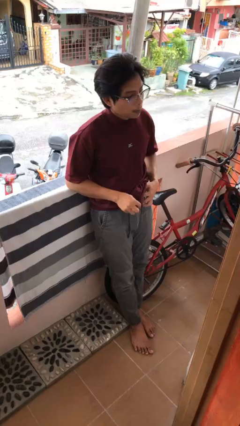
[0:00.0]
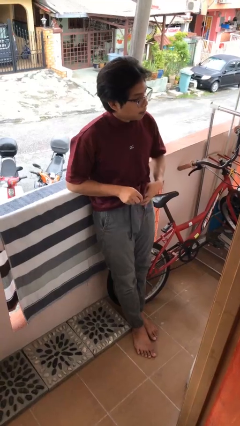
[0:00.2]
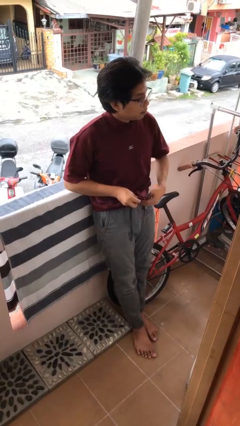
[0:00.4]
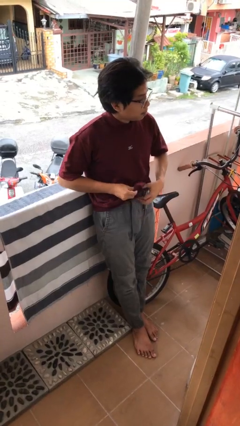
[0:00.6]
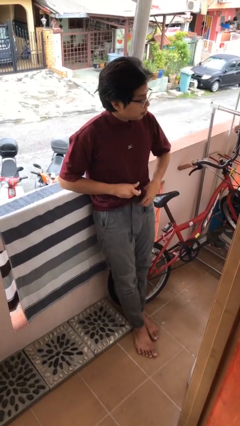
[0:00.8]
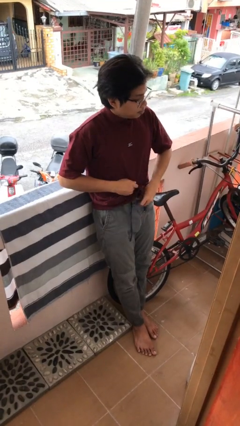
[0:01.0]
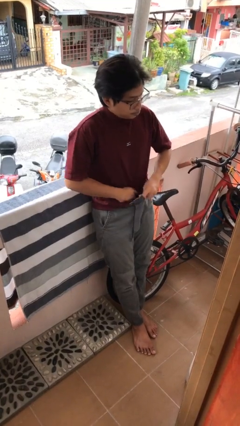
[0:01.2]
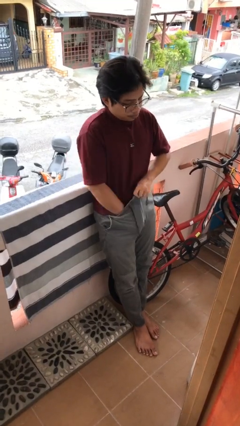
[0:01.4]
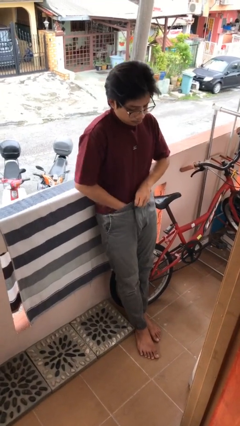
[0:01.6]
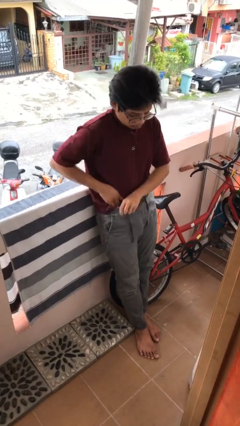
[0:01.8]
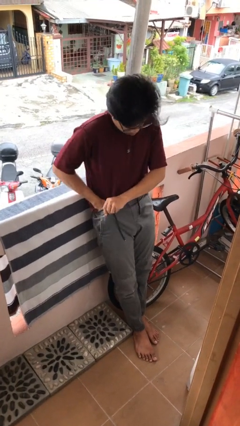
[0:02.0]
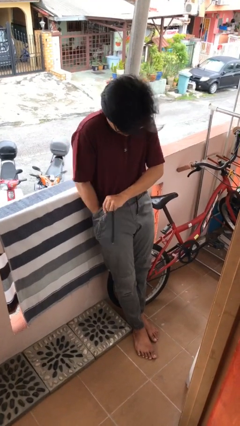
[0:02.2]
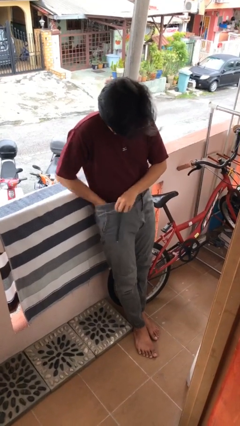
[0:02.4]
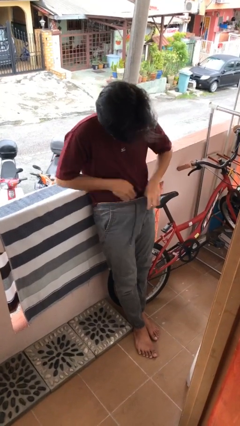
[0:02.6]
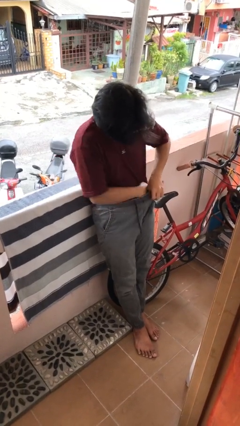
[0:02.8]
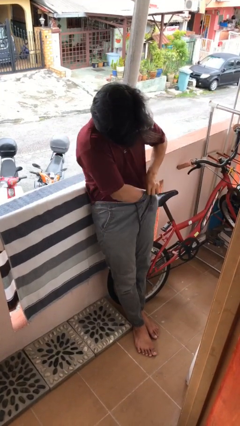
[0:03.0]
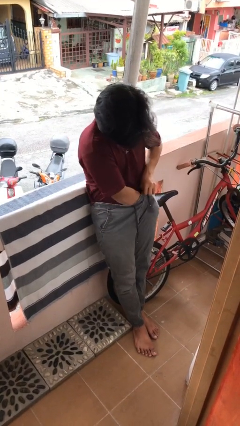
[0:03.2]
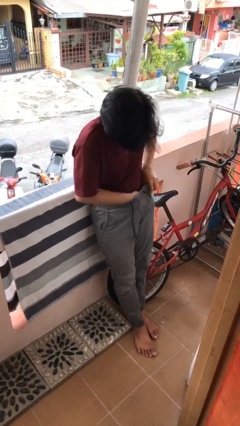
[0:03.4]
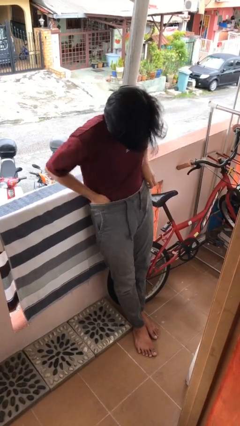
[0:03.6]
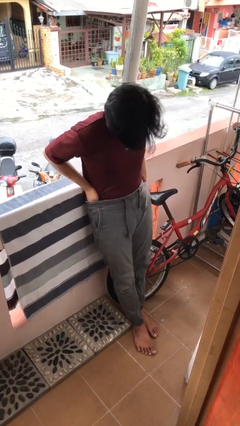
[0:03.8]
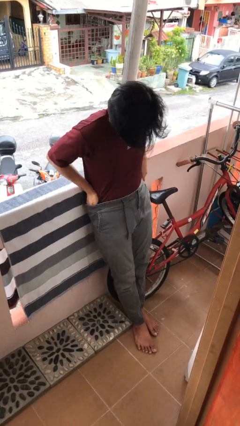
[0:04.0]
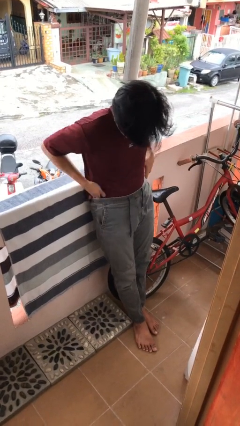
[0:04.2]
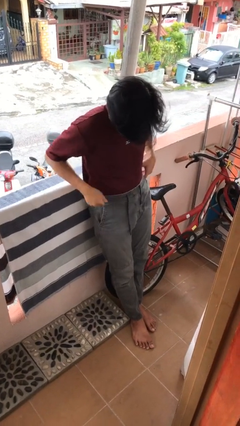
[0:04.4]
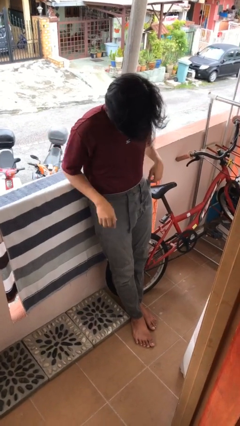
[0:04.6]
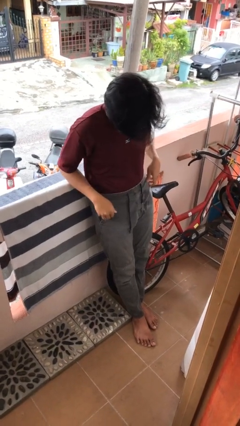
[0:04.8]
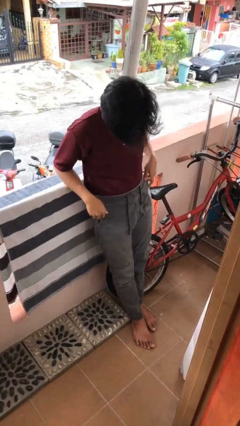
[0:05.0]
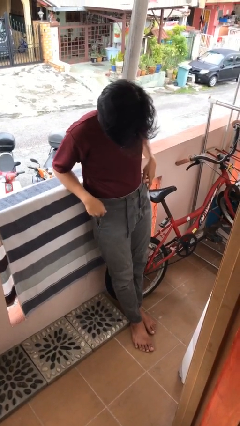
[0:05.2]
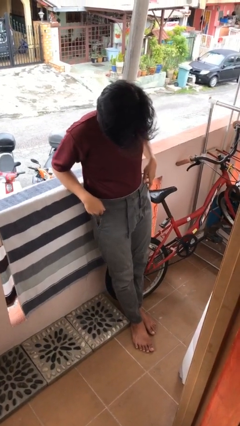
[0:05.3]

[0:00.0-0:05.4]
person tucks in shirt

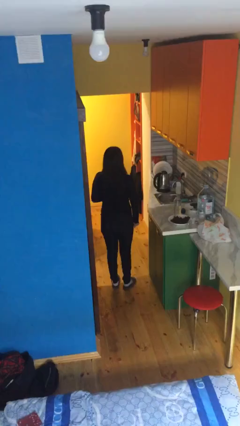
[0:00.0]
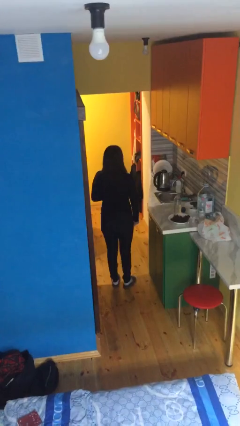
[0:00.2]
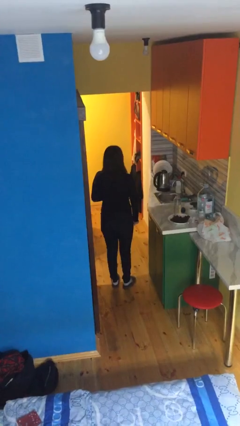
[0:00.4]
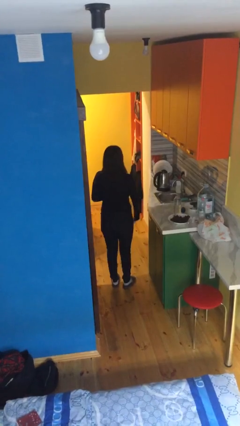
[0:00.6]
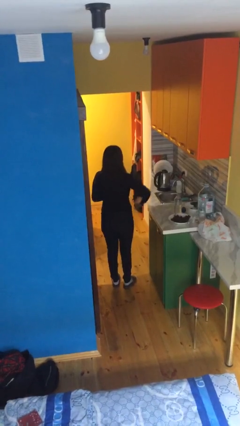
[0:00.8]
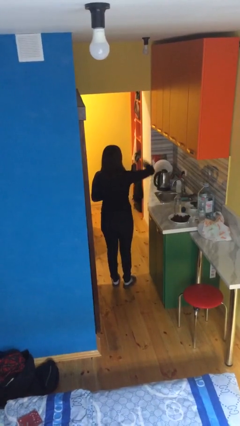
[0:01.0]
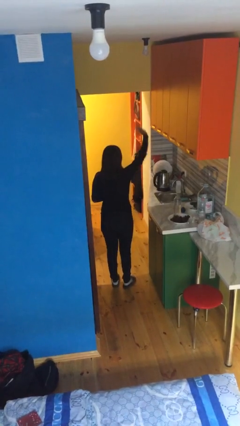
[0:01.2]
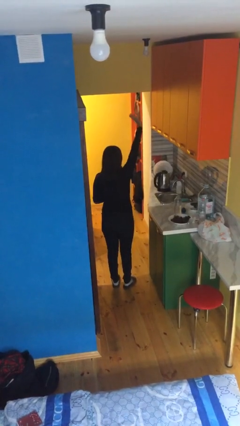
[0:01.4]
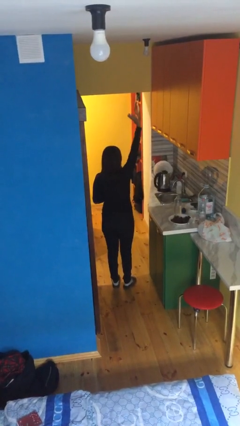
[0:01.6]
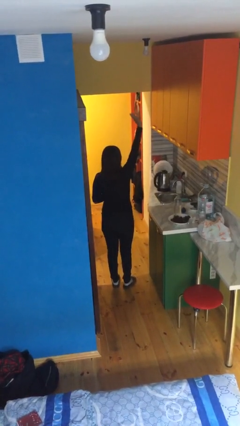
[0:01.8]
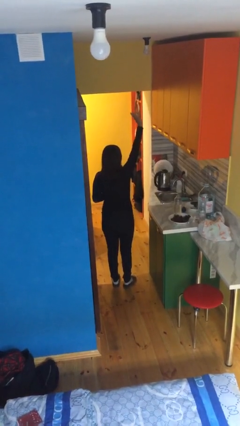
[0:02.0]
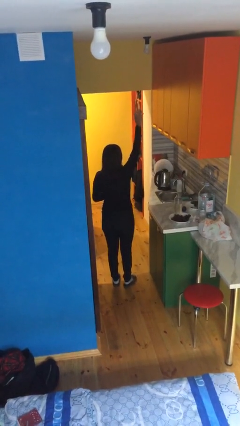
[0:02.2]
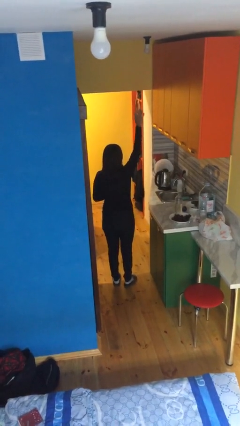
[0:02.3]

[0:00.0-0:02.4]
person gestures swipe up

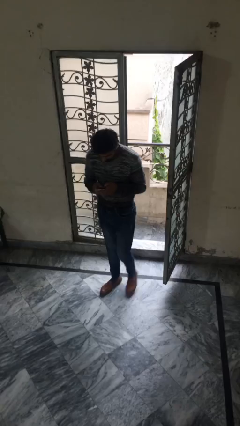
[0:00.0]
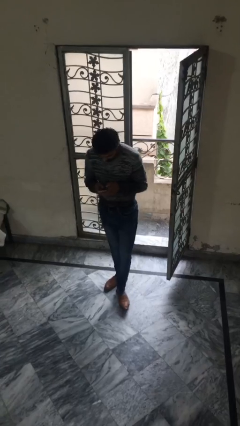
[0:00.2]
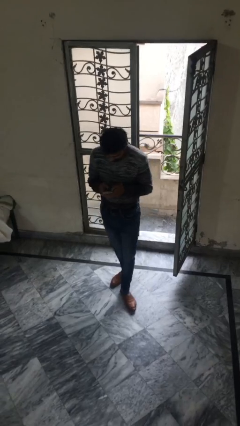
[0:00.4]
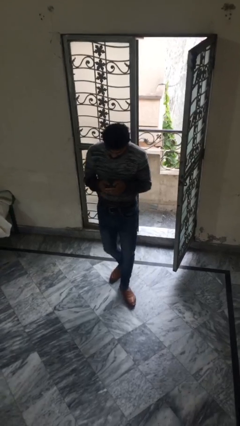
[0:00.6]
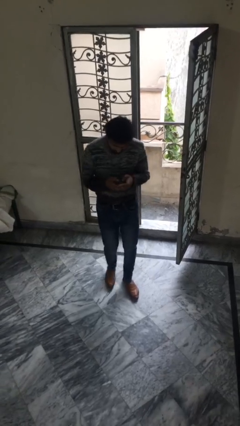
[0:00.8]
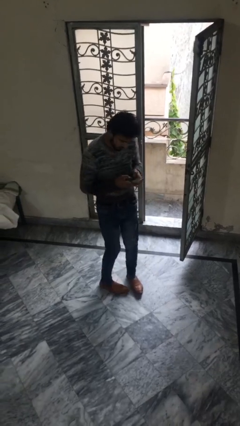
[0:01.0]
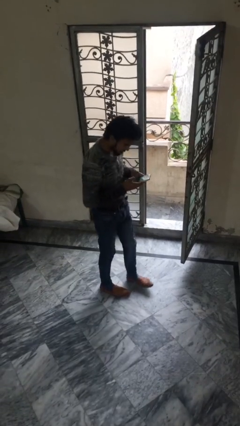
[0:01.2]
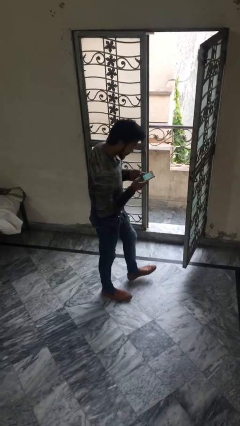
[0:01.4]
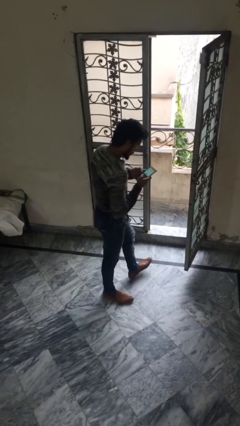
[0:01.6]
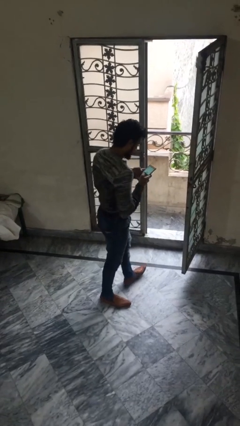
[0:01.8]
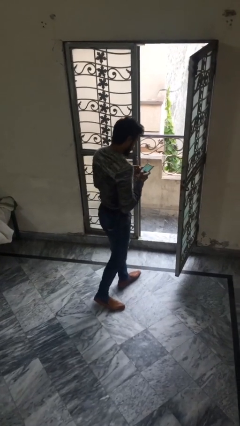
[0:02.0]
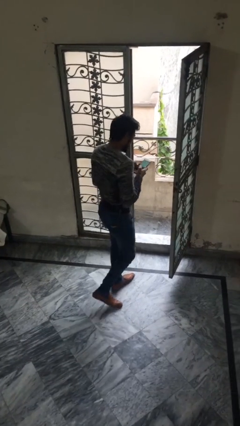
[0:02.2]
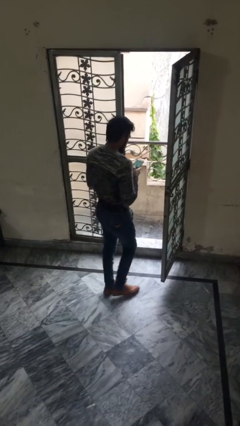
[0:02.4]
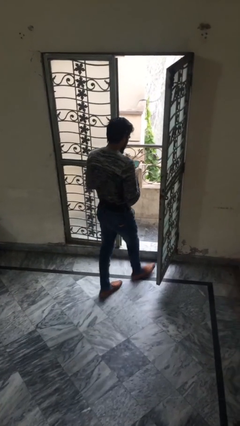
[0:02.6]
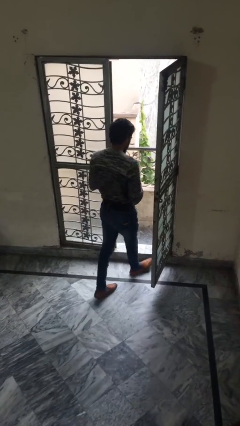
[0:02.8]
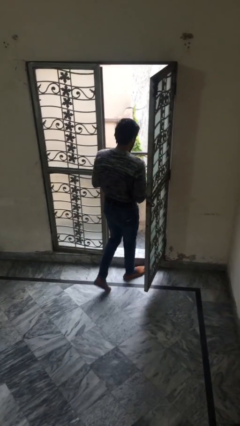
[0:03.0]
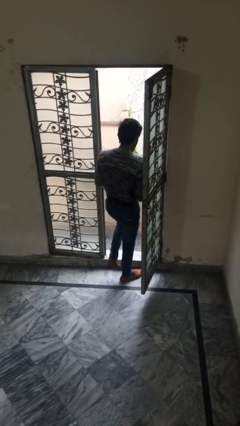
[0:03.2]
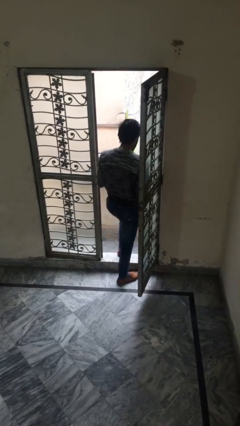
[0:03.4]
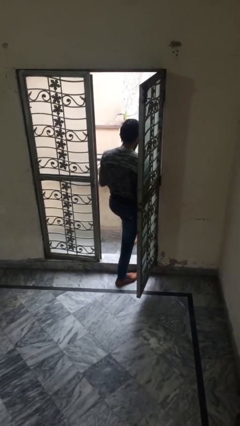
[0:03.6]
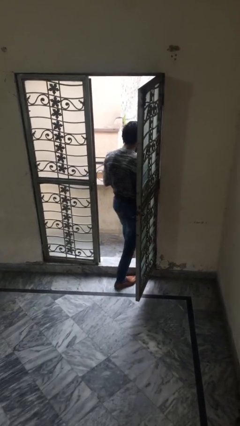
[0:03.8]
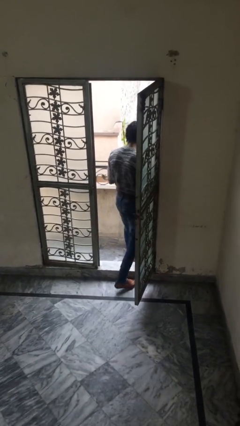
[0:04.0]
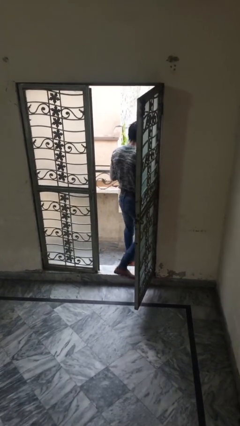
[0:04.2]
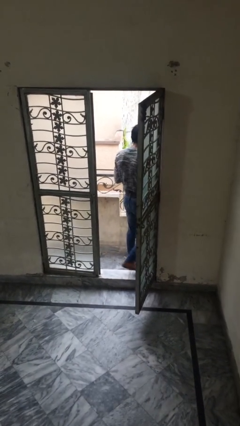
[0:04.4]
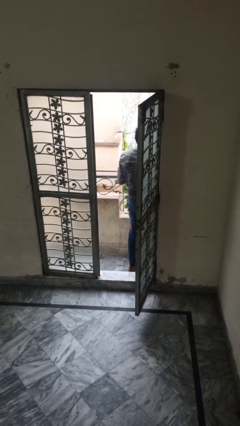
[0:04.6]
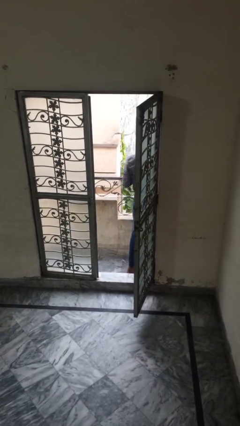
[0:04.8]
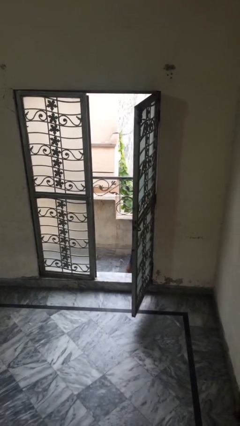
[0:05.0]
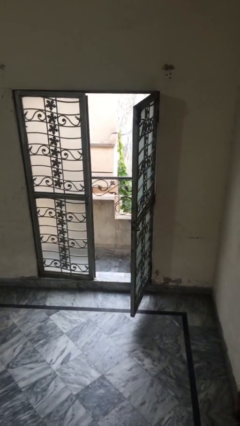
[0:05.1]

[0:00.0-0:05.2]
person exits scene through structure

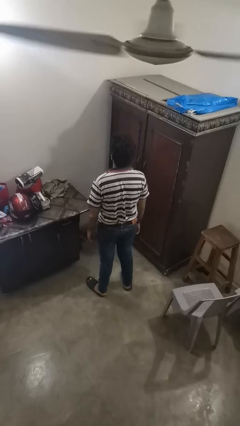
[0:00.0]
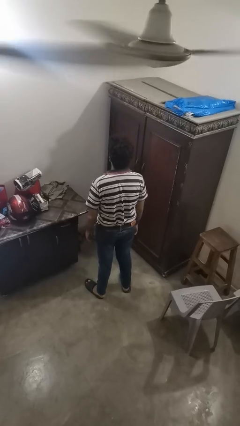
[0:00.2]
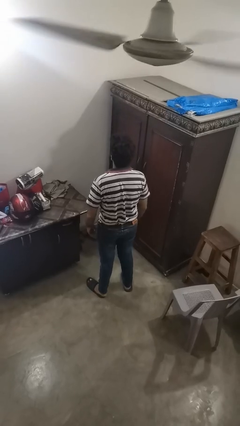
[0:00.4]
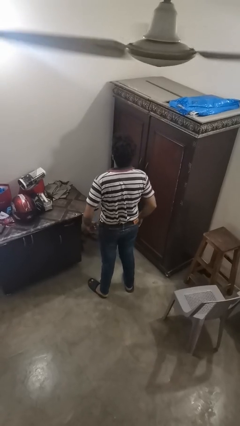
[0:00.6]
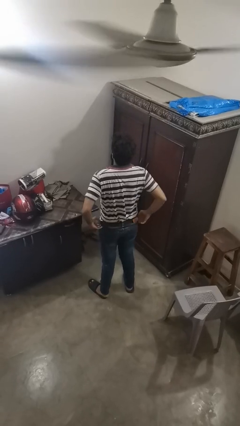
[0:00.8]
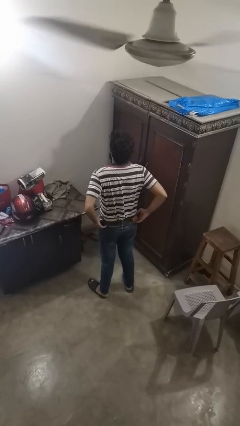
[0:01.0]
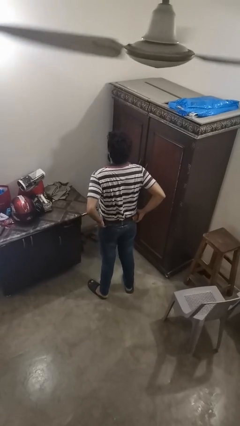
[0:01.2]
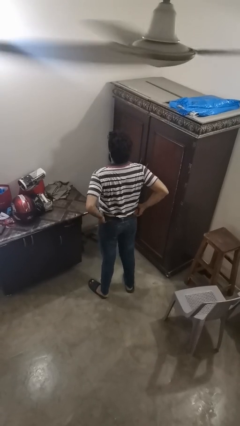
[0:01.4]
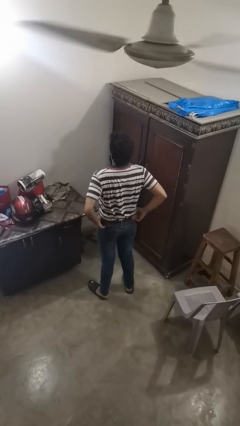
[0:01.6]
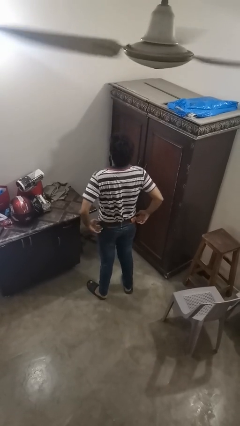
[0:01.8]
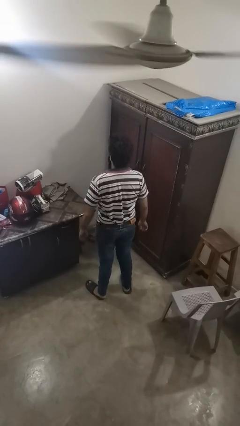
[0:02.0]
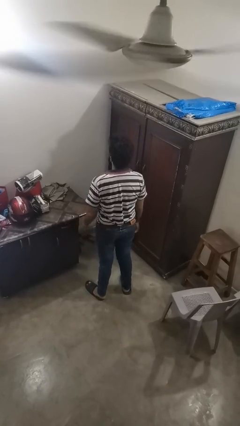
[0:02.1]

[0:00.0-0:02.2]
person hikes up pants

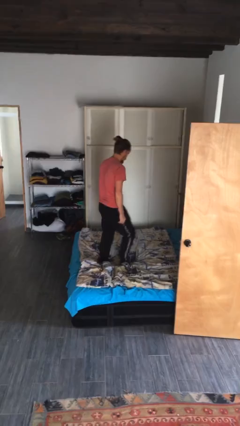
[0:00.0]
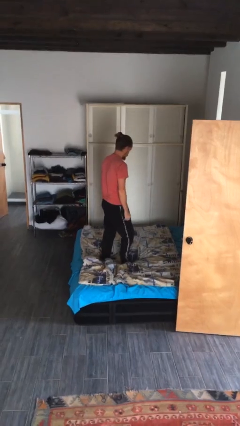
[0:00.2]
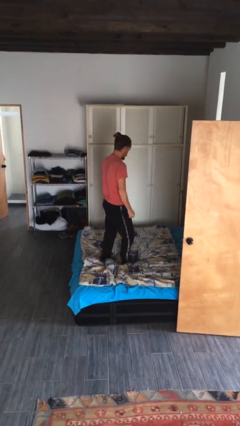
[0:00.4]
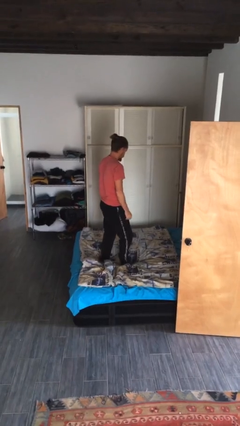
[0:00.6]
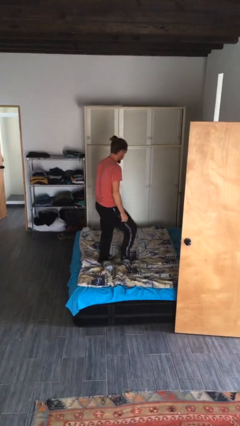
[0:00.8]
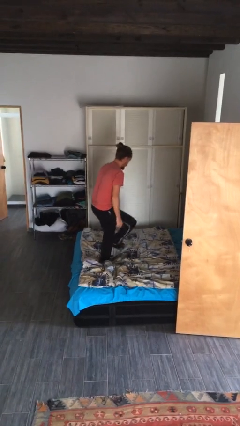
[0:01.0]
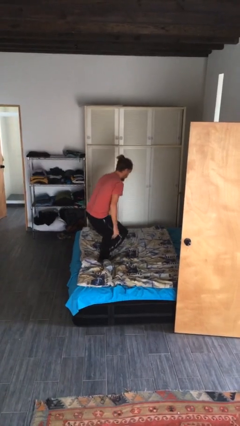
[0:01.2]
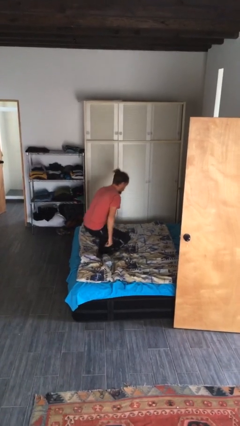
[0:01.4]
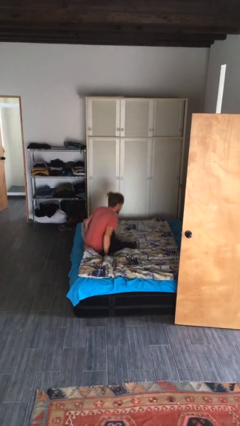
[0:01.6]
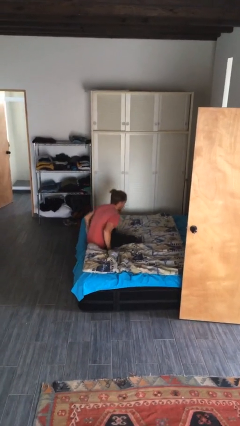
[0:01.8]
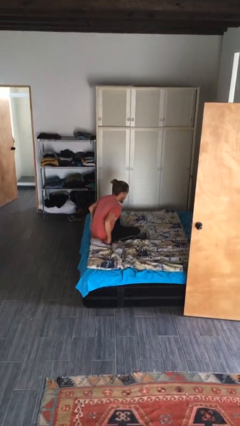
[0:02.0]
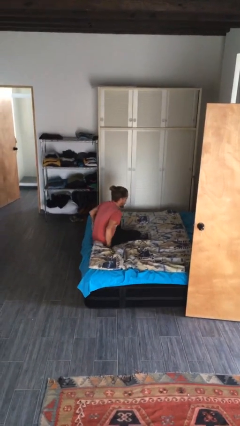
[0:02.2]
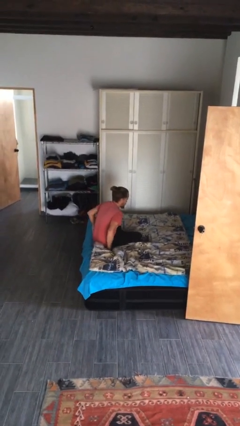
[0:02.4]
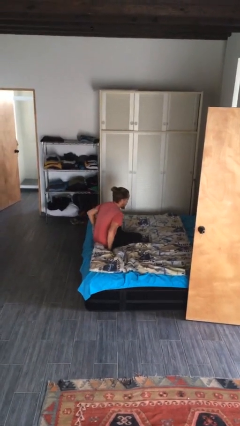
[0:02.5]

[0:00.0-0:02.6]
person sits crisscross
